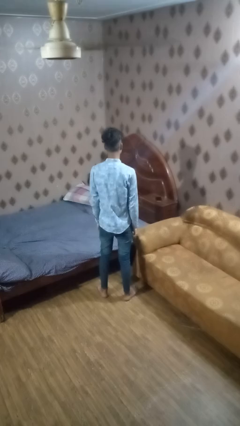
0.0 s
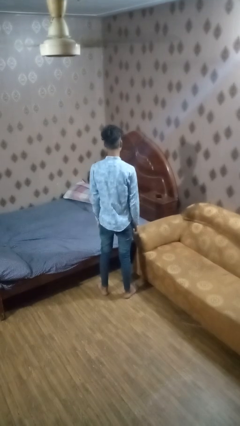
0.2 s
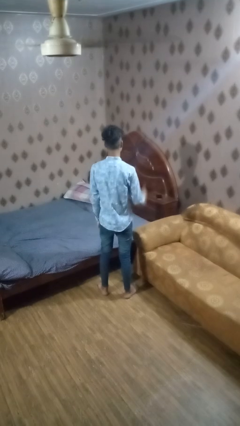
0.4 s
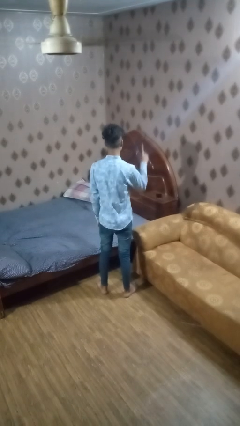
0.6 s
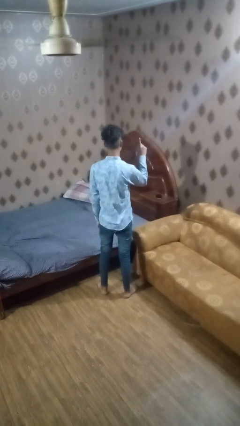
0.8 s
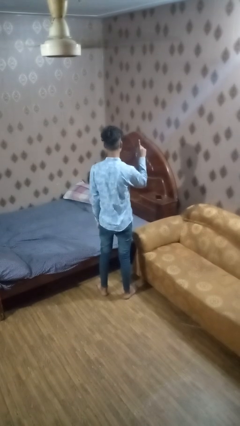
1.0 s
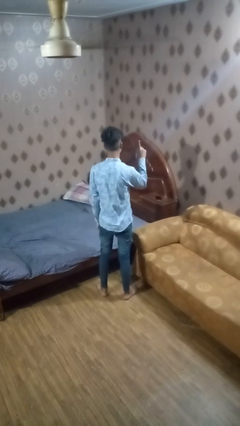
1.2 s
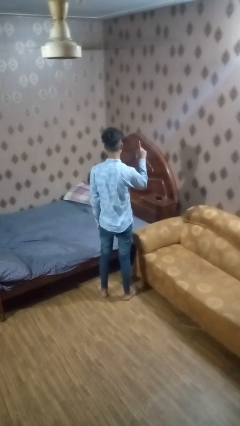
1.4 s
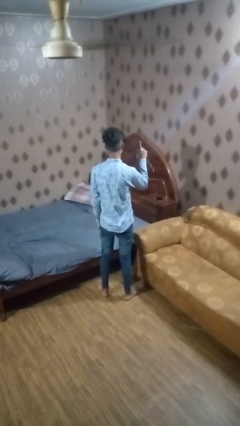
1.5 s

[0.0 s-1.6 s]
person gestures number one

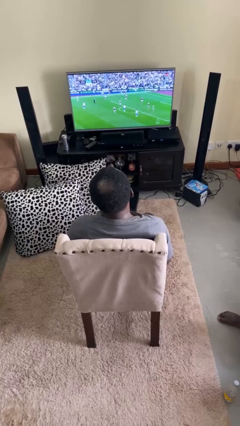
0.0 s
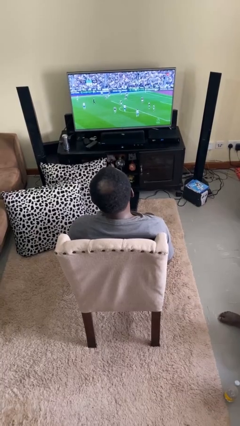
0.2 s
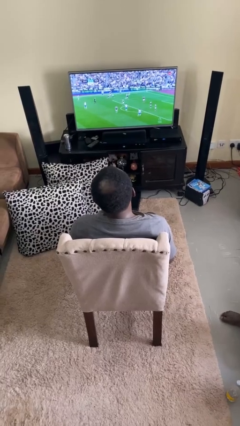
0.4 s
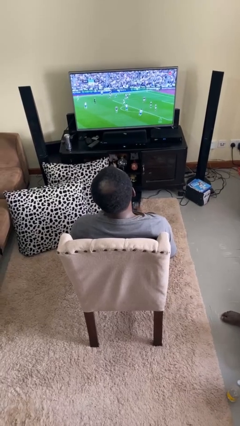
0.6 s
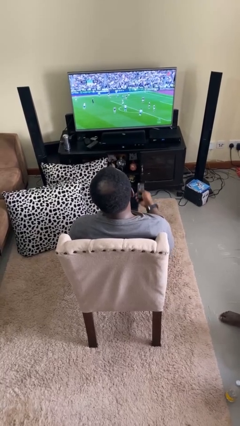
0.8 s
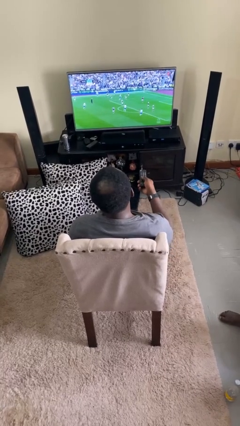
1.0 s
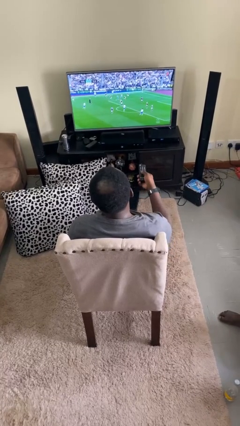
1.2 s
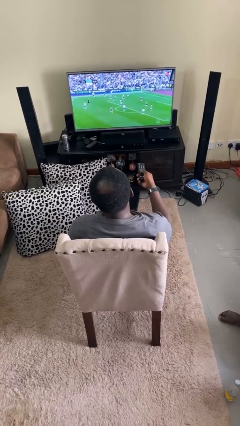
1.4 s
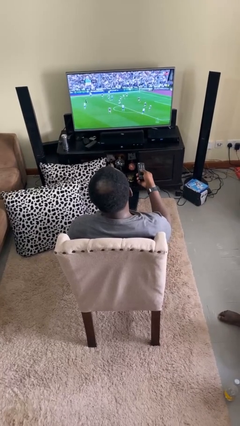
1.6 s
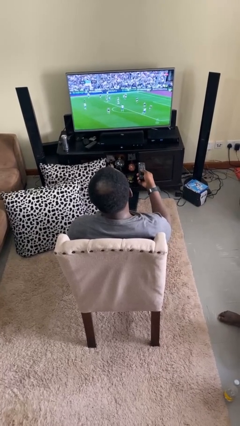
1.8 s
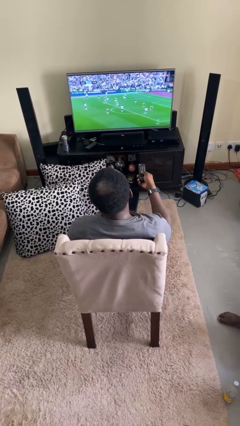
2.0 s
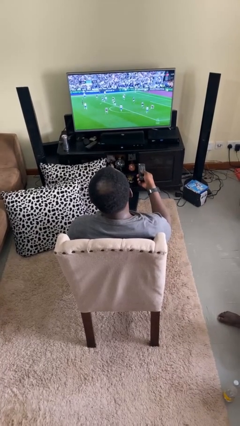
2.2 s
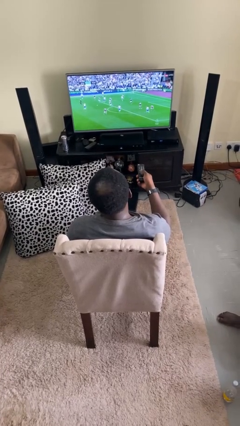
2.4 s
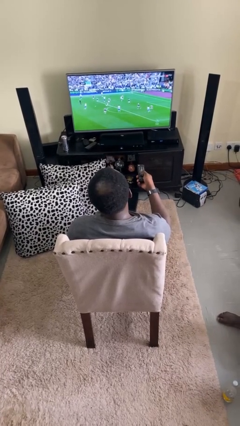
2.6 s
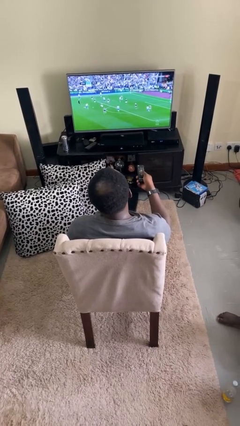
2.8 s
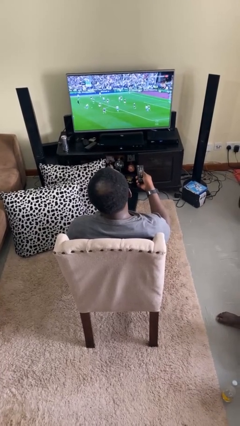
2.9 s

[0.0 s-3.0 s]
person uses television remote

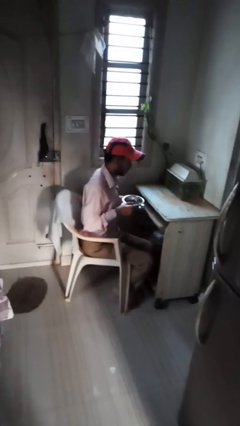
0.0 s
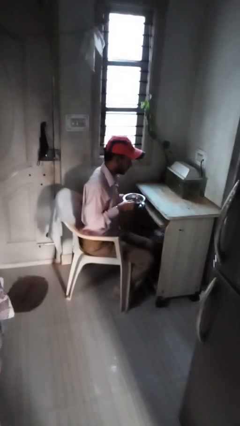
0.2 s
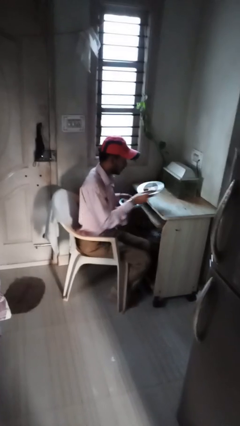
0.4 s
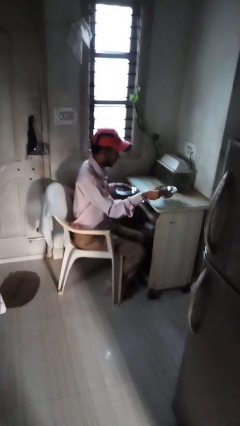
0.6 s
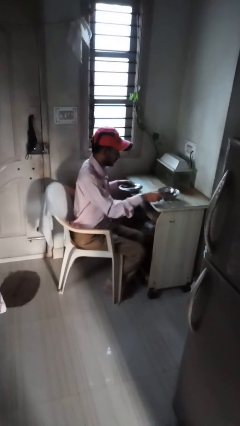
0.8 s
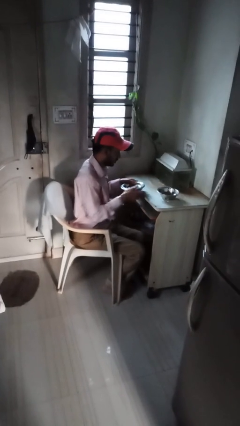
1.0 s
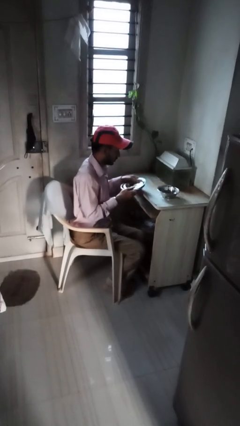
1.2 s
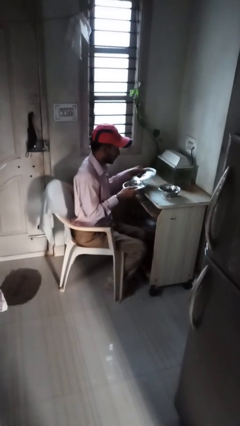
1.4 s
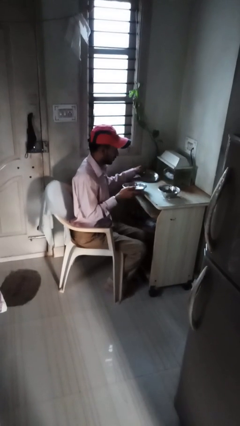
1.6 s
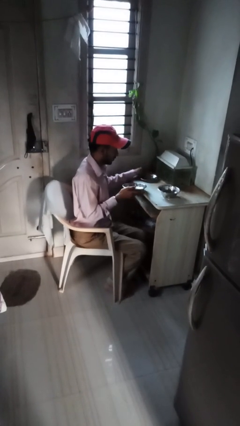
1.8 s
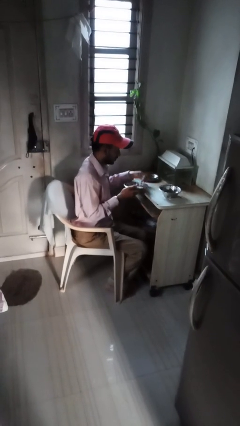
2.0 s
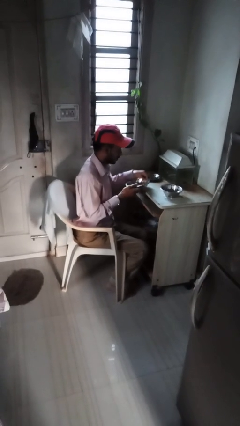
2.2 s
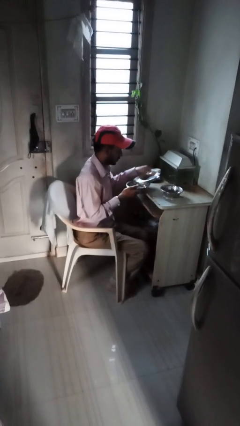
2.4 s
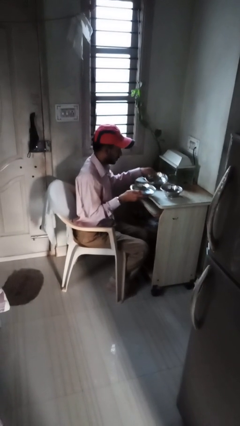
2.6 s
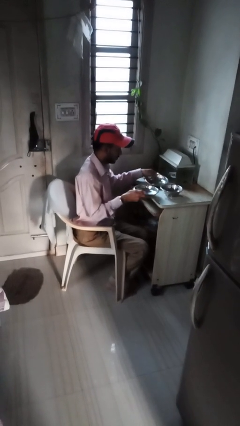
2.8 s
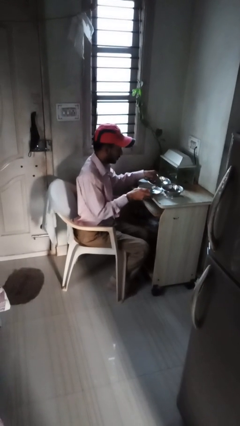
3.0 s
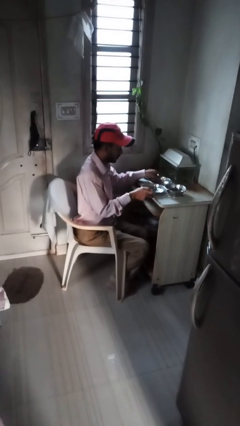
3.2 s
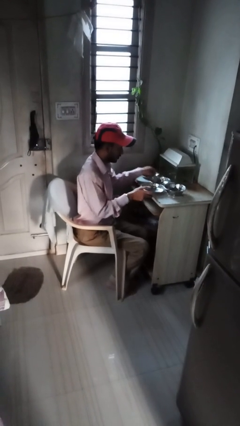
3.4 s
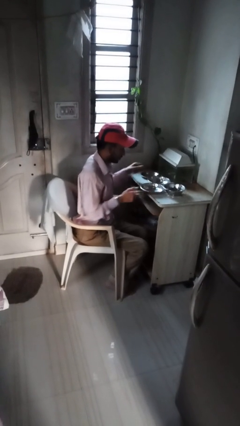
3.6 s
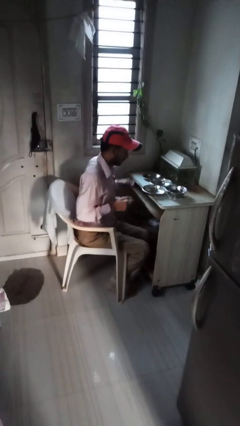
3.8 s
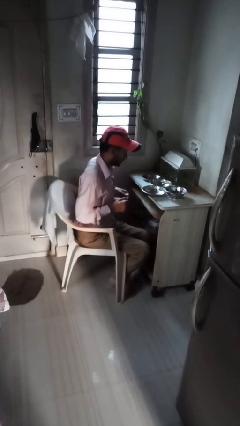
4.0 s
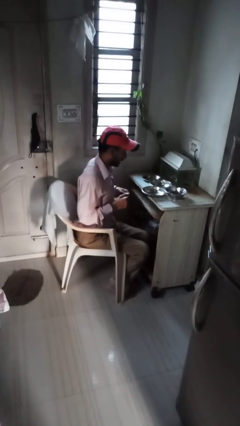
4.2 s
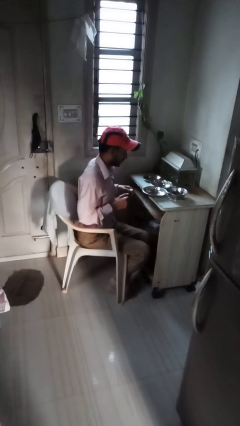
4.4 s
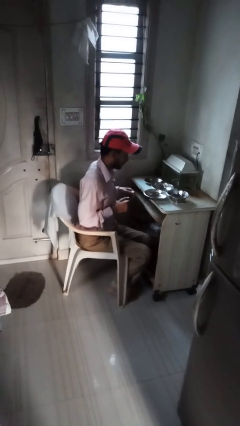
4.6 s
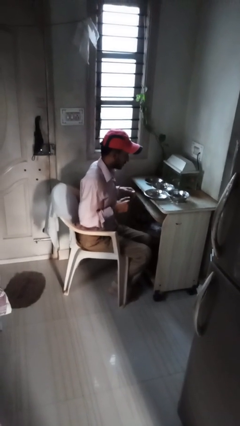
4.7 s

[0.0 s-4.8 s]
person sets table

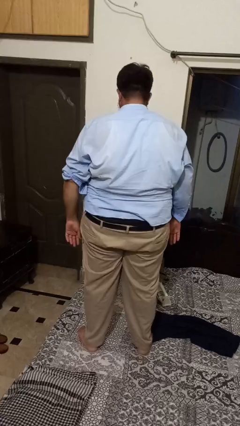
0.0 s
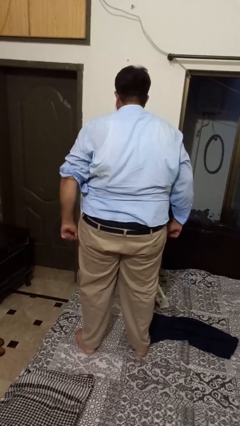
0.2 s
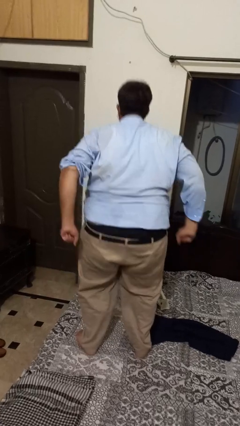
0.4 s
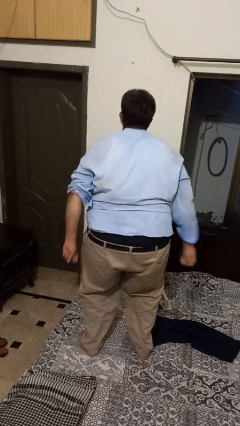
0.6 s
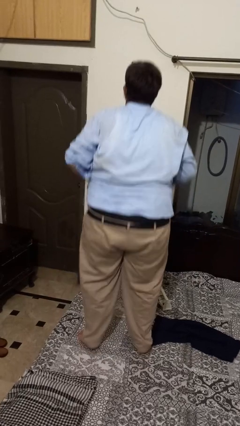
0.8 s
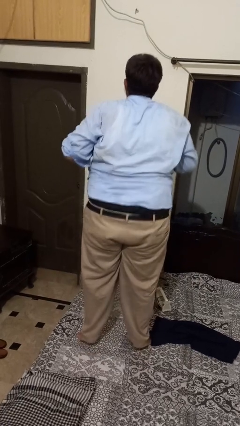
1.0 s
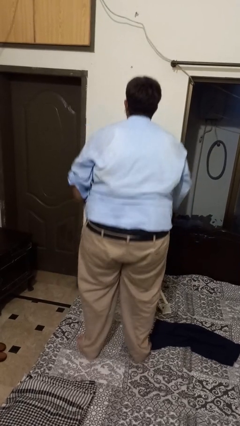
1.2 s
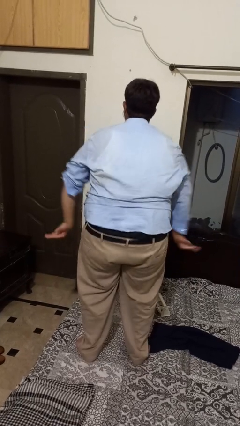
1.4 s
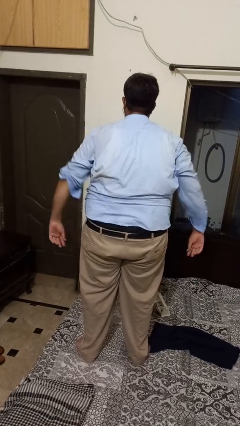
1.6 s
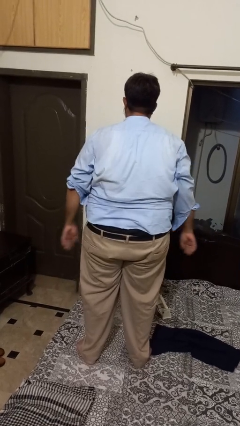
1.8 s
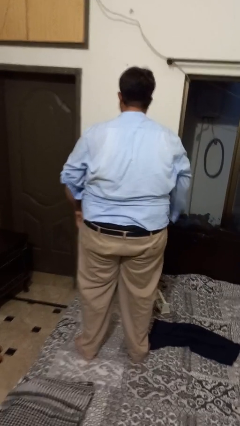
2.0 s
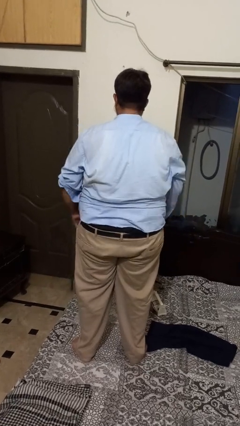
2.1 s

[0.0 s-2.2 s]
person jumps on bed

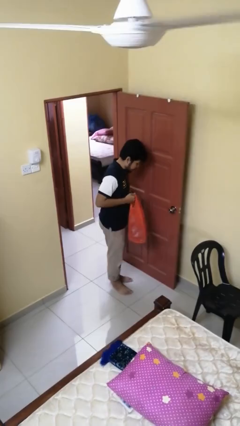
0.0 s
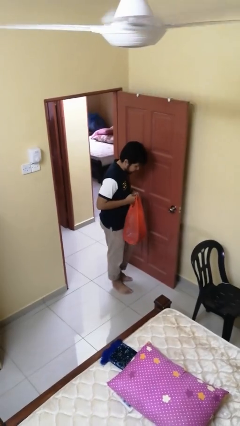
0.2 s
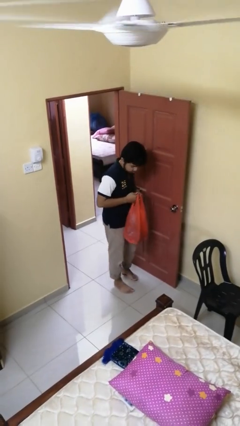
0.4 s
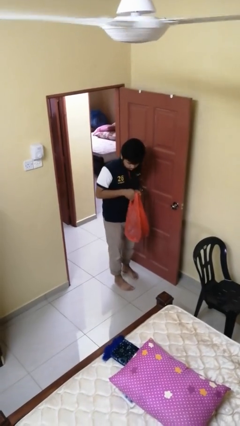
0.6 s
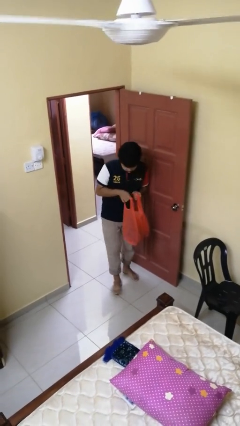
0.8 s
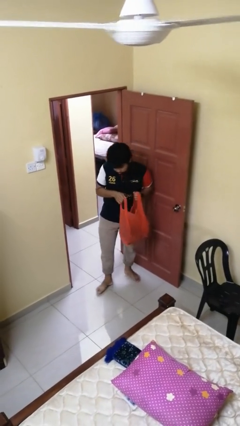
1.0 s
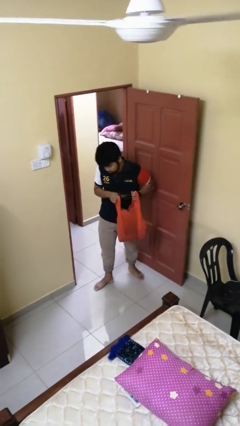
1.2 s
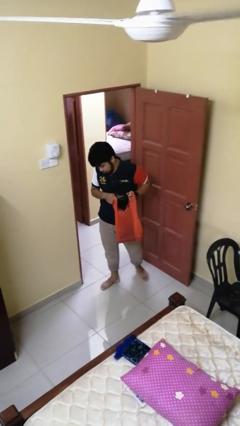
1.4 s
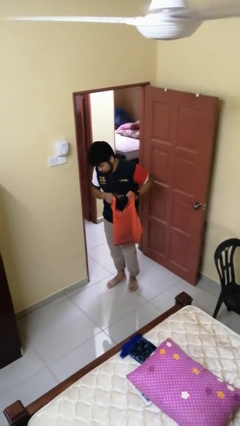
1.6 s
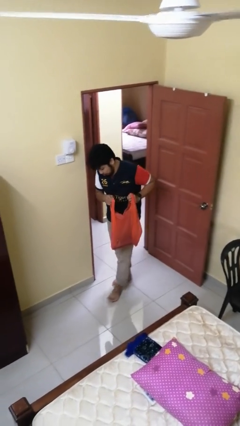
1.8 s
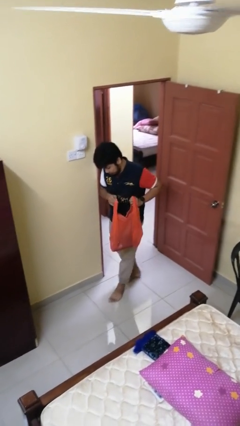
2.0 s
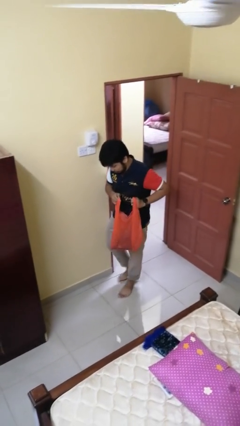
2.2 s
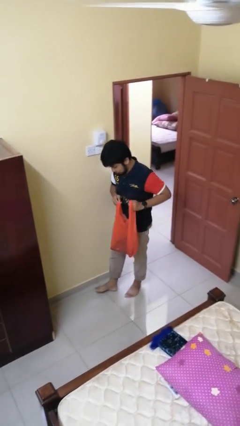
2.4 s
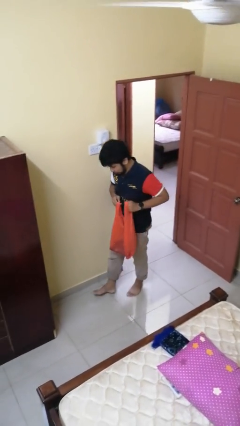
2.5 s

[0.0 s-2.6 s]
person carries groceries

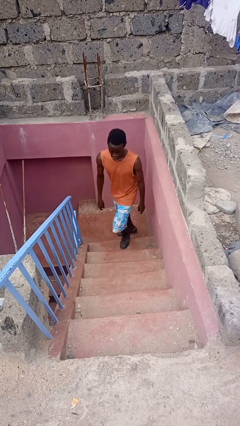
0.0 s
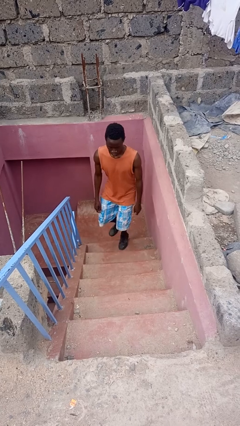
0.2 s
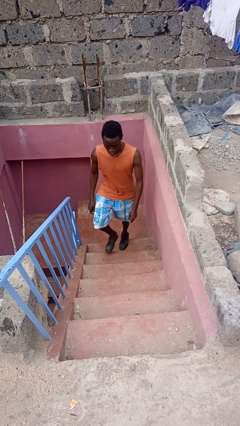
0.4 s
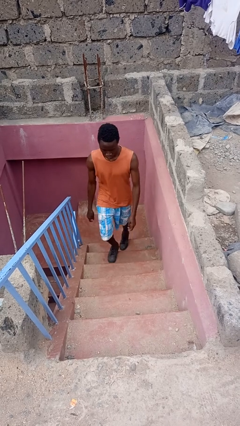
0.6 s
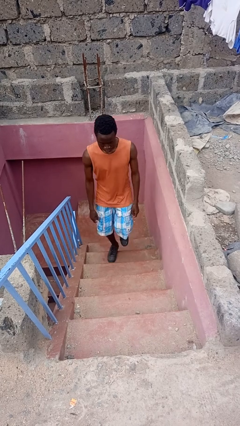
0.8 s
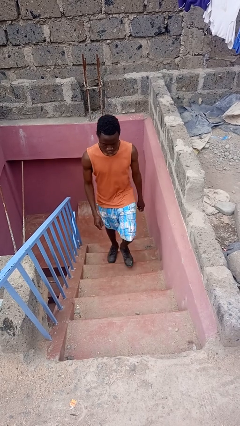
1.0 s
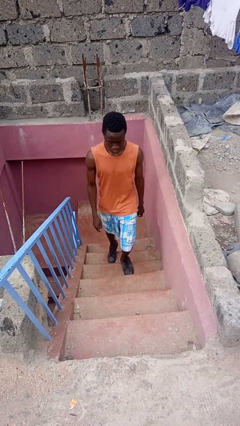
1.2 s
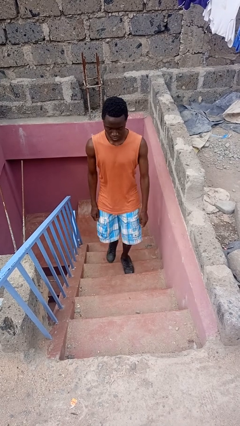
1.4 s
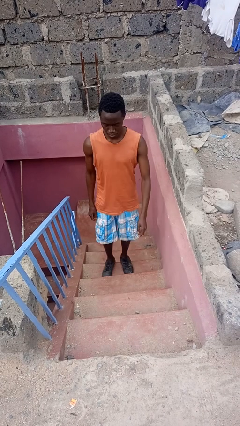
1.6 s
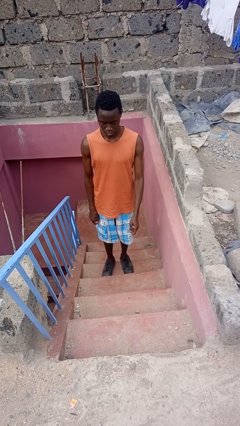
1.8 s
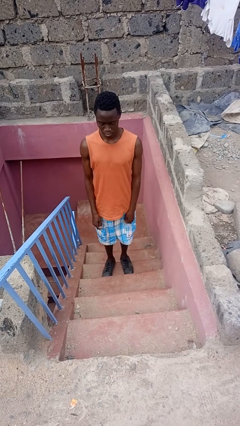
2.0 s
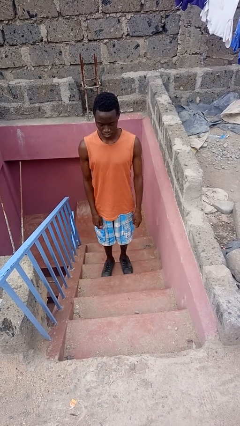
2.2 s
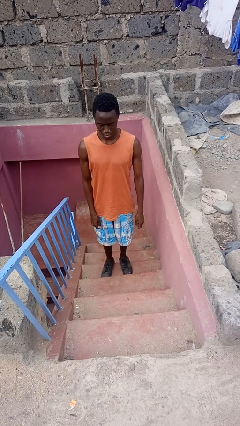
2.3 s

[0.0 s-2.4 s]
person climbs up stairs

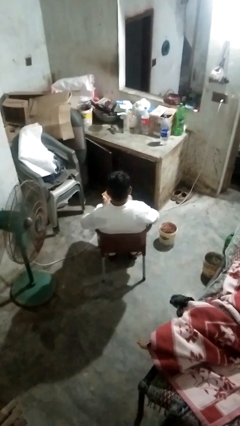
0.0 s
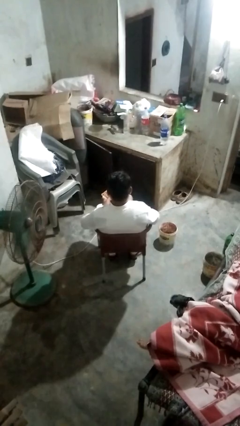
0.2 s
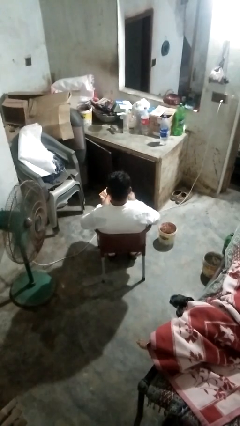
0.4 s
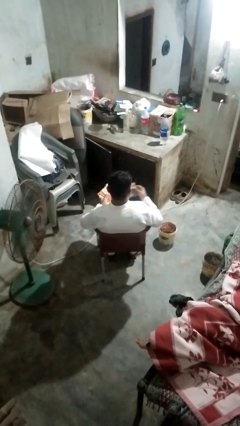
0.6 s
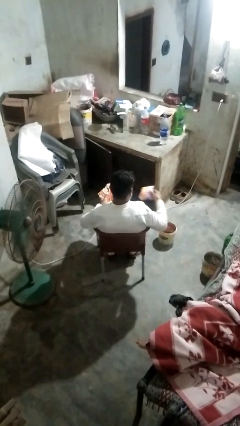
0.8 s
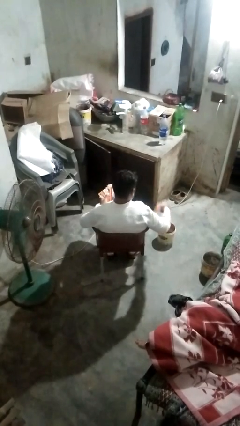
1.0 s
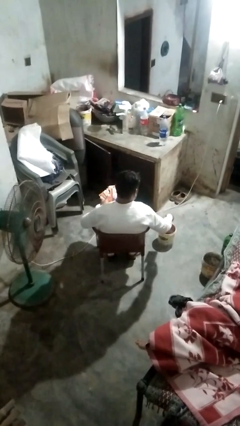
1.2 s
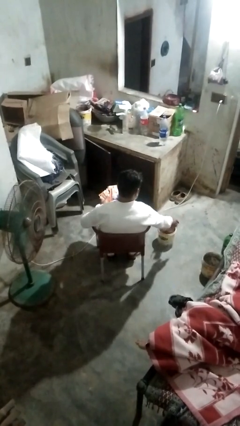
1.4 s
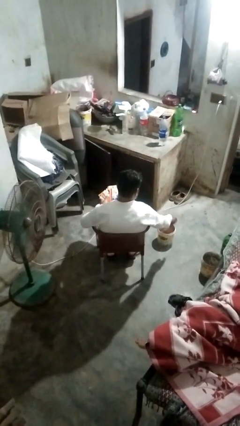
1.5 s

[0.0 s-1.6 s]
person discards trash
